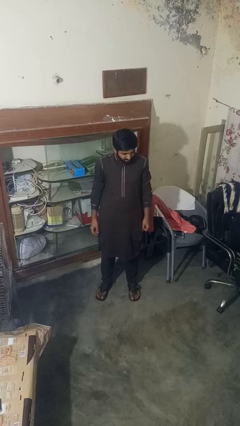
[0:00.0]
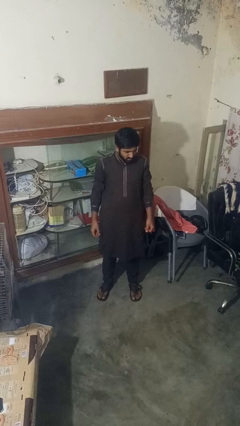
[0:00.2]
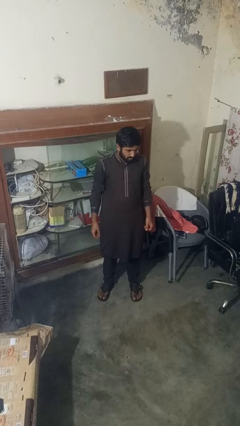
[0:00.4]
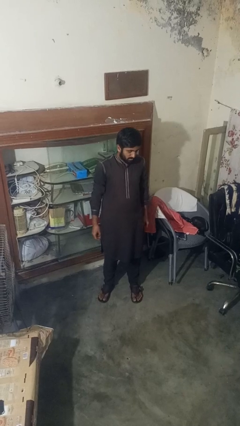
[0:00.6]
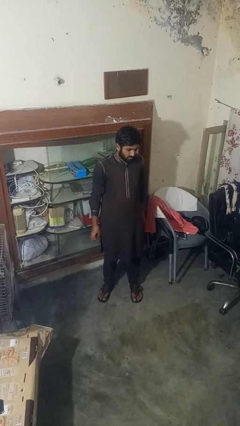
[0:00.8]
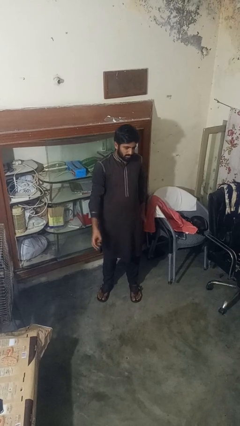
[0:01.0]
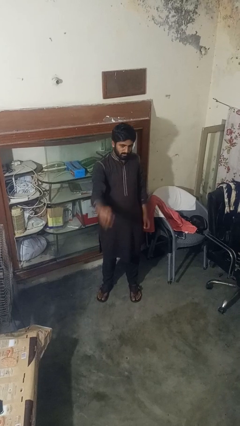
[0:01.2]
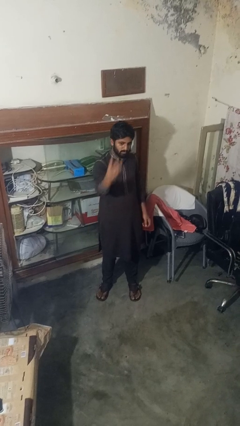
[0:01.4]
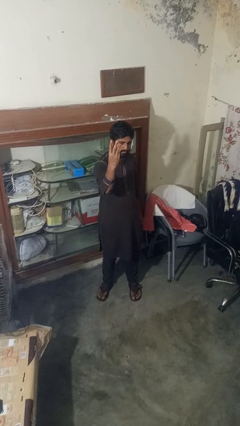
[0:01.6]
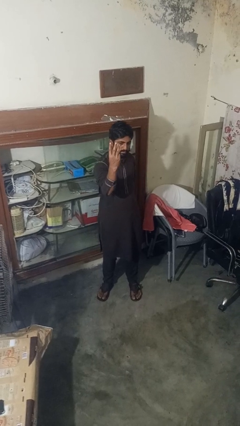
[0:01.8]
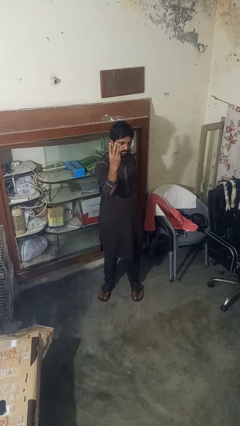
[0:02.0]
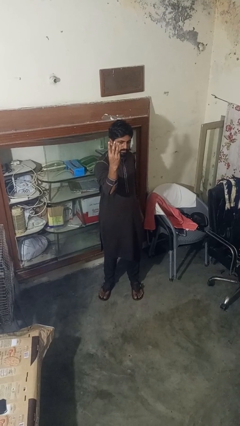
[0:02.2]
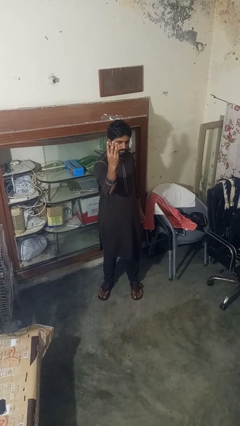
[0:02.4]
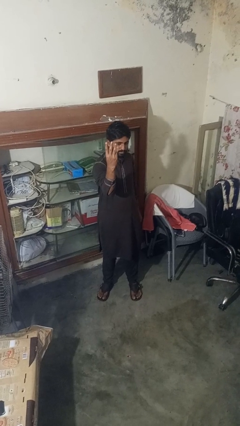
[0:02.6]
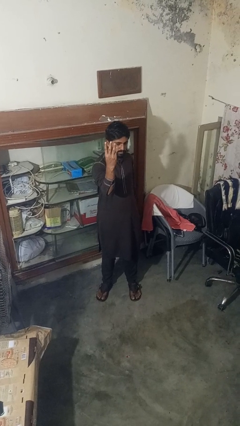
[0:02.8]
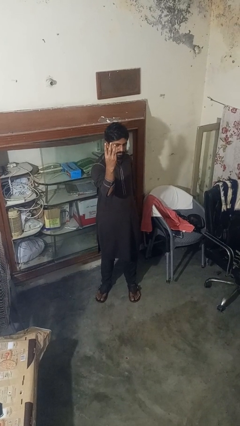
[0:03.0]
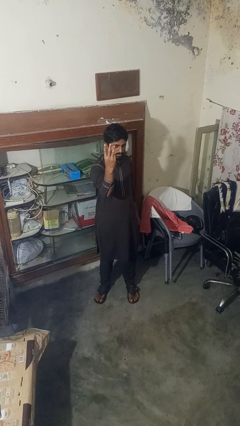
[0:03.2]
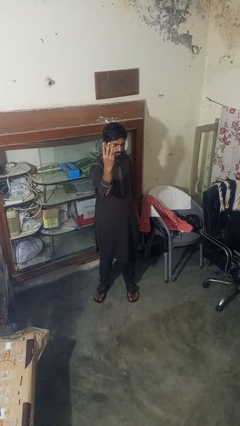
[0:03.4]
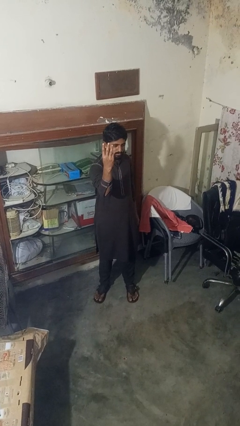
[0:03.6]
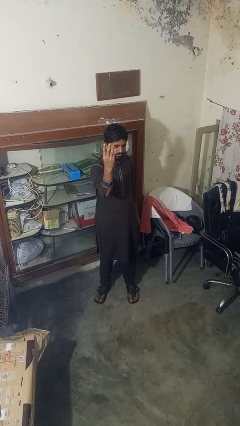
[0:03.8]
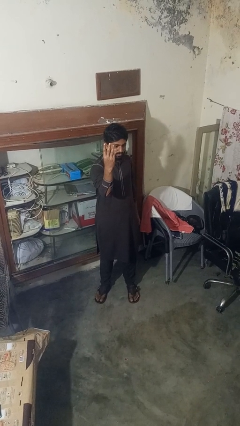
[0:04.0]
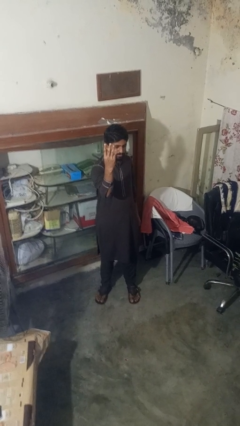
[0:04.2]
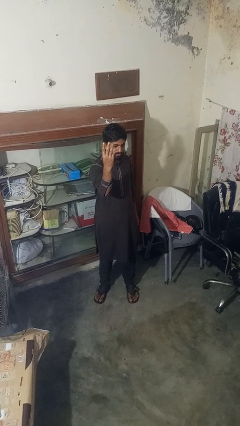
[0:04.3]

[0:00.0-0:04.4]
person gestures number three

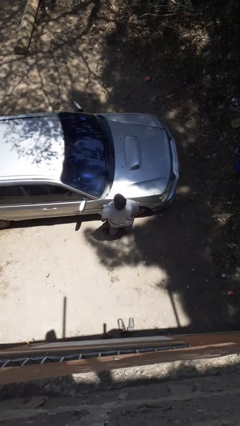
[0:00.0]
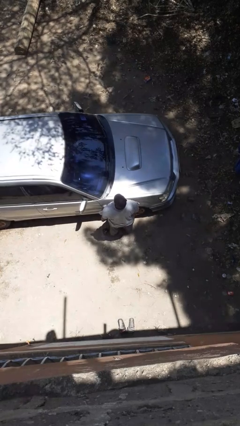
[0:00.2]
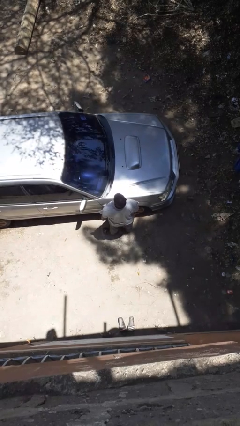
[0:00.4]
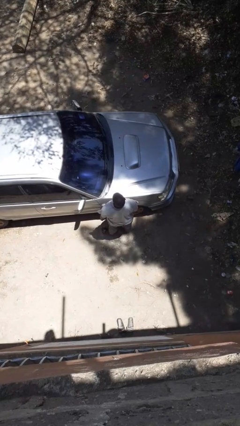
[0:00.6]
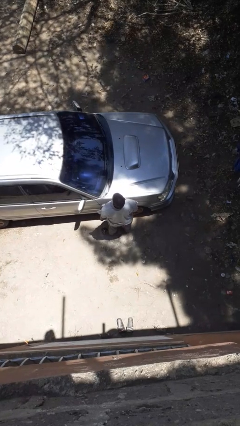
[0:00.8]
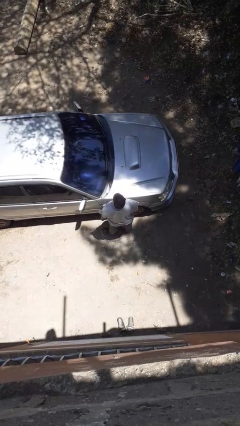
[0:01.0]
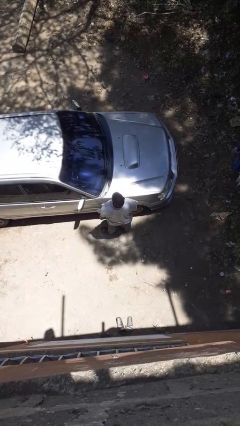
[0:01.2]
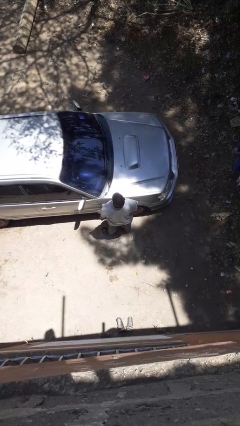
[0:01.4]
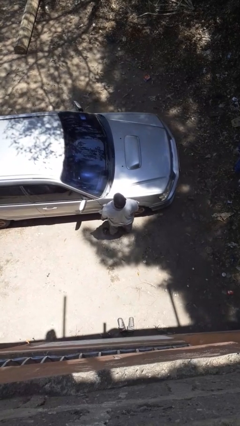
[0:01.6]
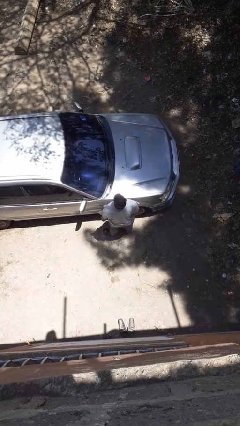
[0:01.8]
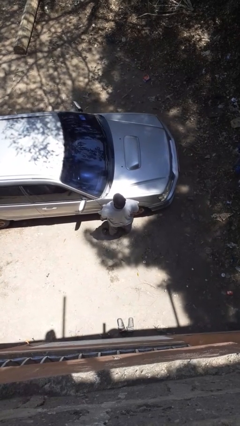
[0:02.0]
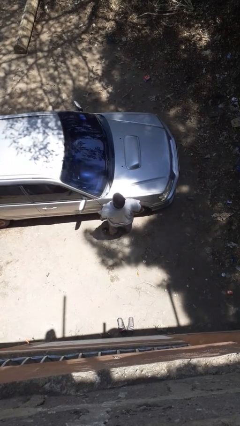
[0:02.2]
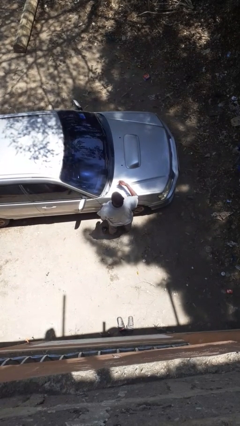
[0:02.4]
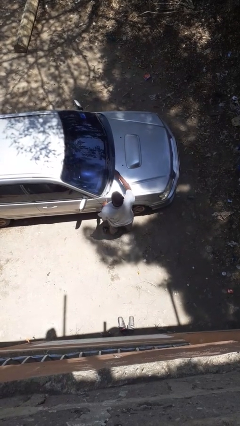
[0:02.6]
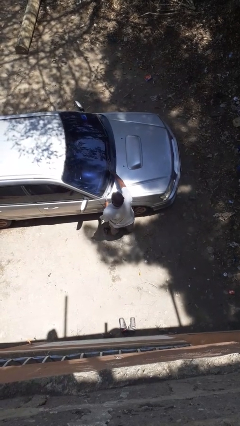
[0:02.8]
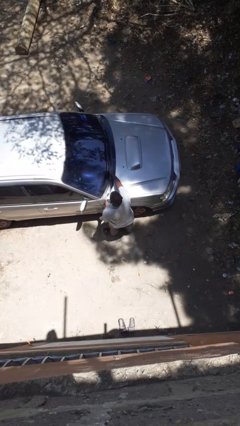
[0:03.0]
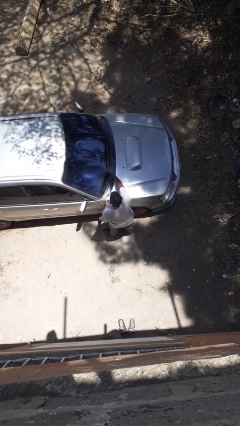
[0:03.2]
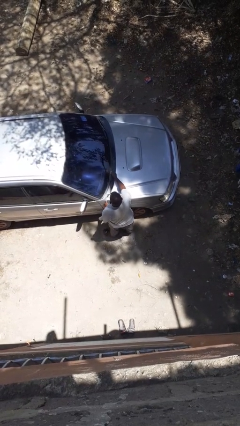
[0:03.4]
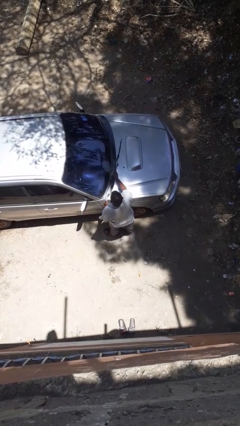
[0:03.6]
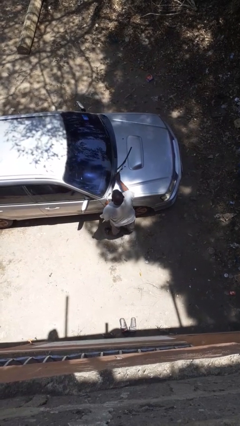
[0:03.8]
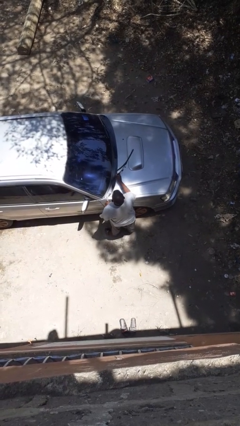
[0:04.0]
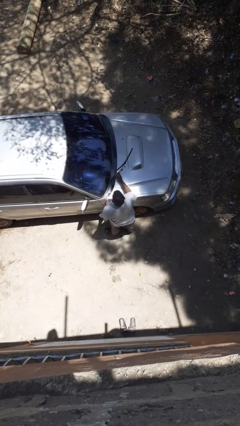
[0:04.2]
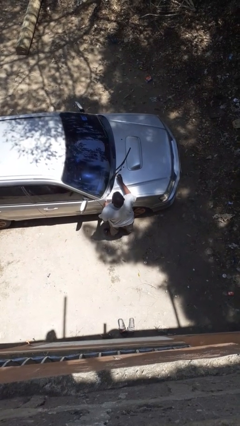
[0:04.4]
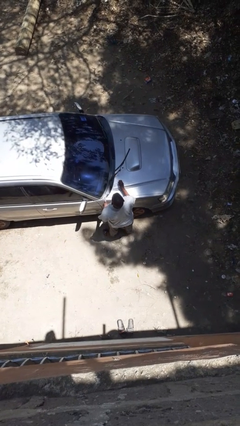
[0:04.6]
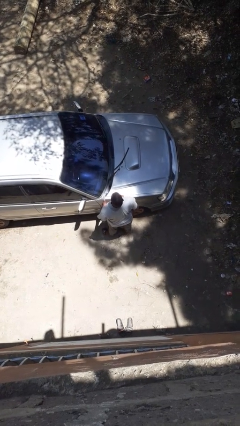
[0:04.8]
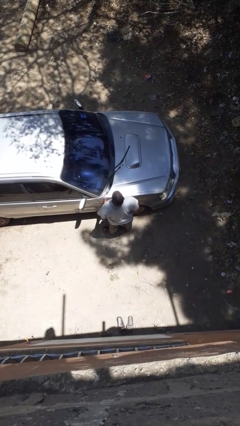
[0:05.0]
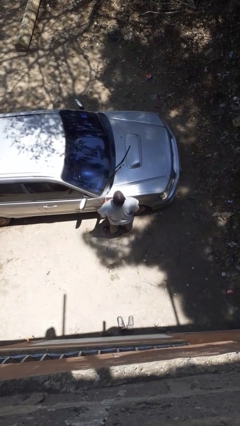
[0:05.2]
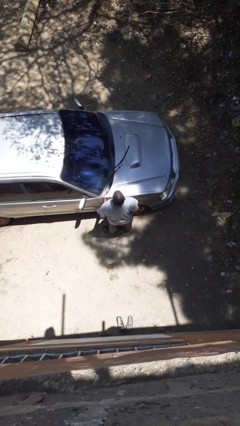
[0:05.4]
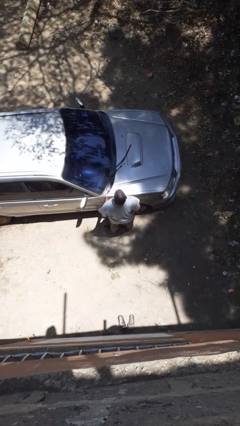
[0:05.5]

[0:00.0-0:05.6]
person flips up car wipers

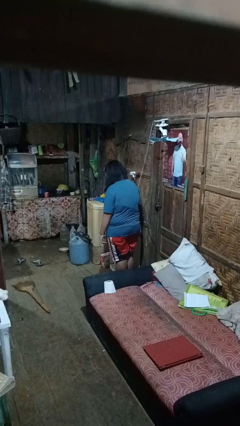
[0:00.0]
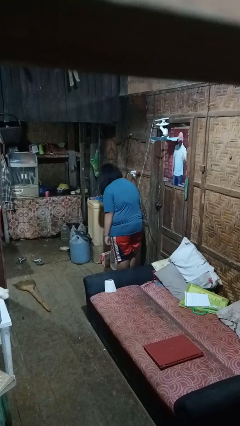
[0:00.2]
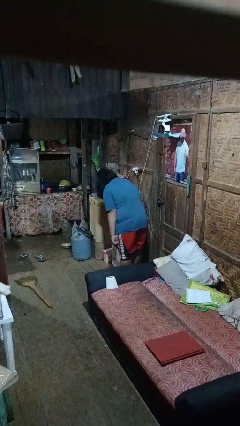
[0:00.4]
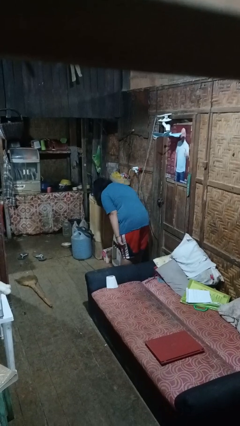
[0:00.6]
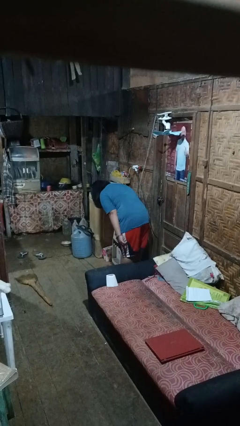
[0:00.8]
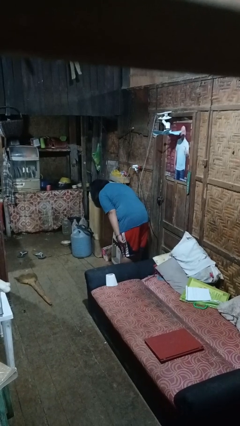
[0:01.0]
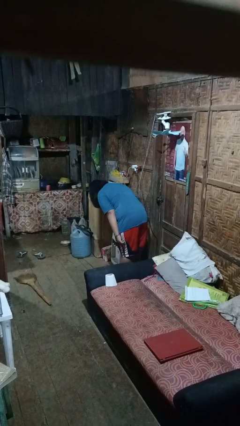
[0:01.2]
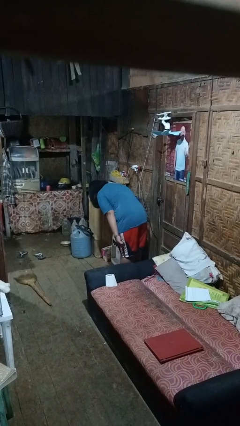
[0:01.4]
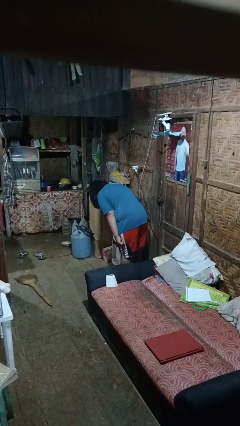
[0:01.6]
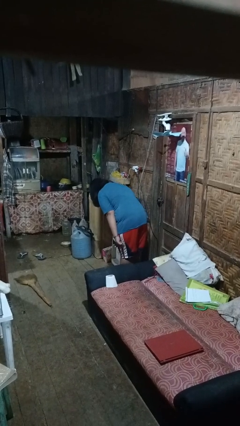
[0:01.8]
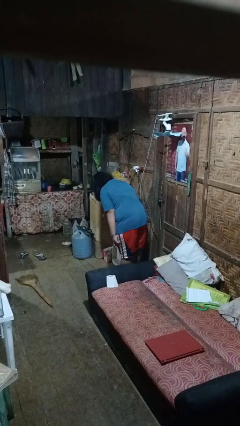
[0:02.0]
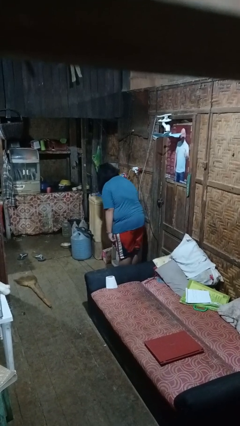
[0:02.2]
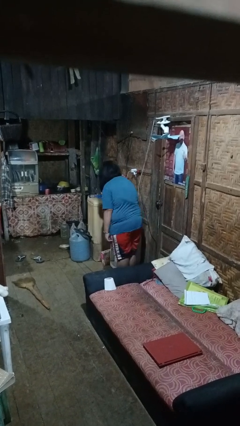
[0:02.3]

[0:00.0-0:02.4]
person bows

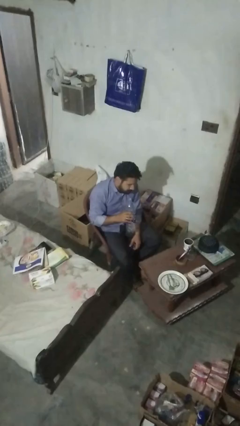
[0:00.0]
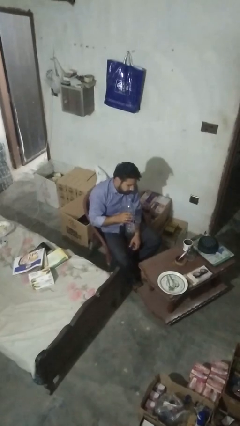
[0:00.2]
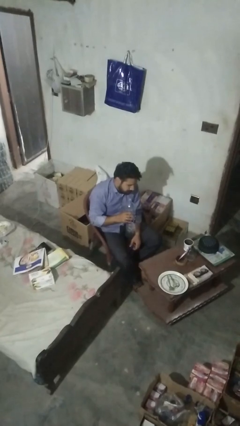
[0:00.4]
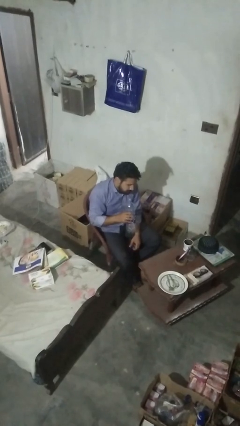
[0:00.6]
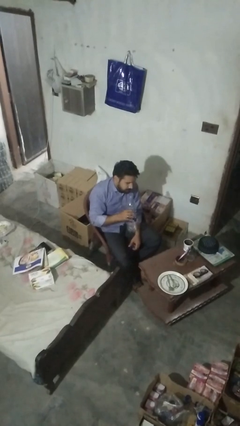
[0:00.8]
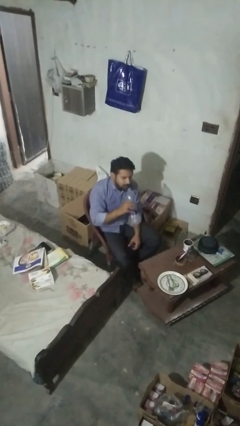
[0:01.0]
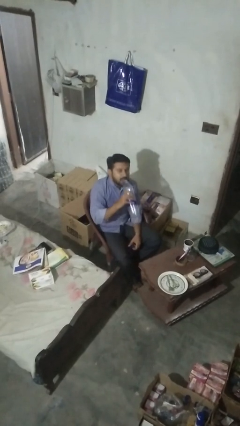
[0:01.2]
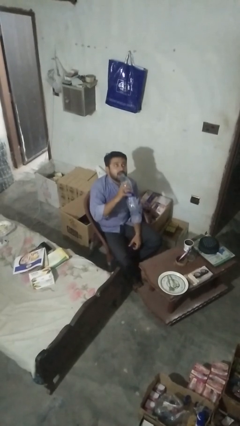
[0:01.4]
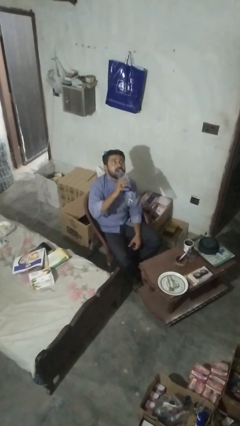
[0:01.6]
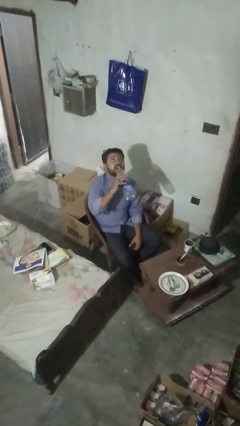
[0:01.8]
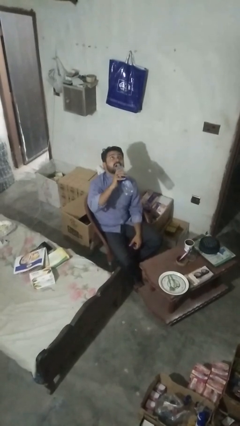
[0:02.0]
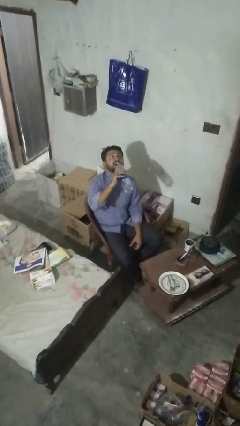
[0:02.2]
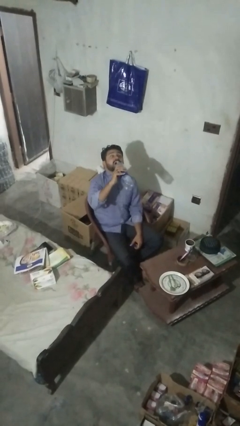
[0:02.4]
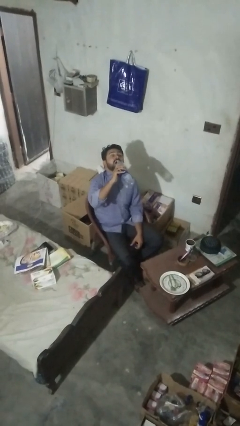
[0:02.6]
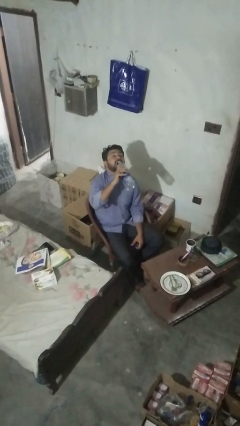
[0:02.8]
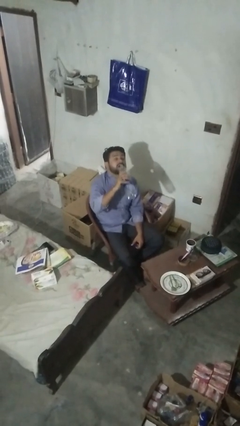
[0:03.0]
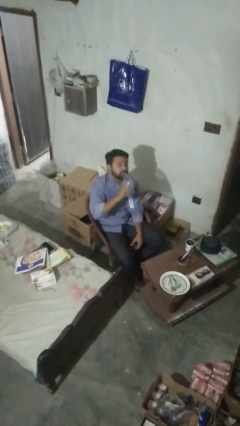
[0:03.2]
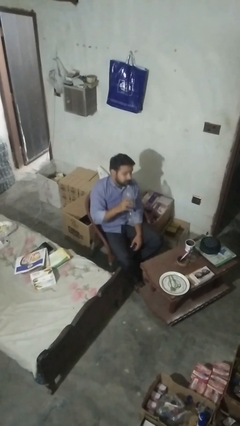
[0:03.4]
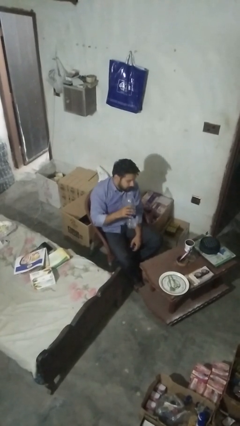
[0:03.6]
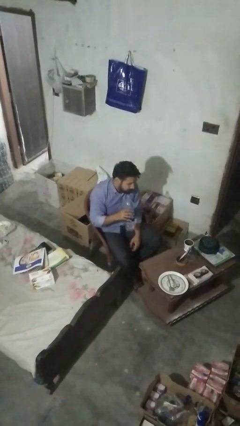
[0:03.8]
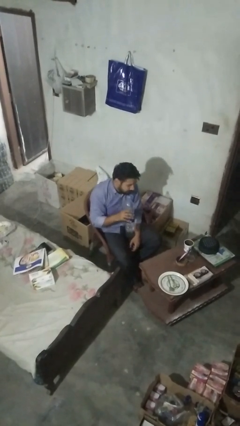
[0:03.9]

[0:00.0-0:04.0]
person drinks from bottle

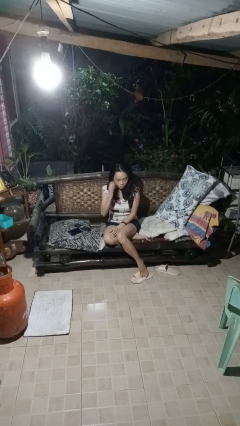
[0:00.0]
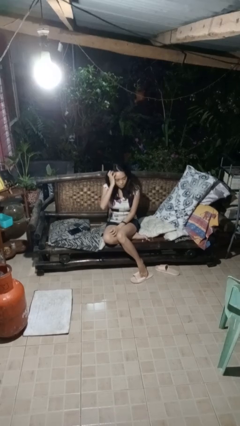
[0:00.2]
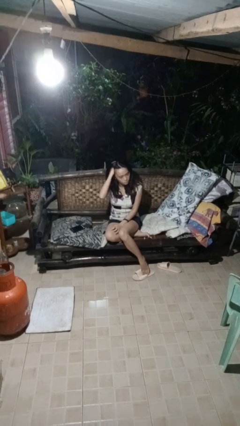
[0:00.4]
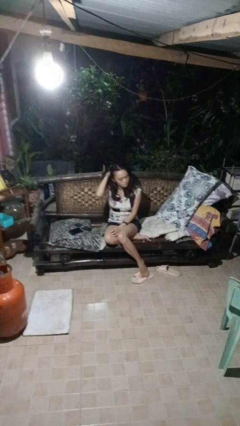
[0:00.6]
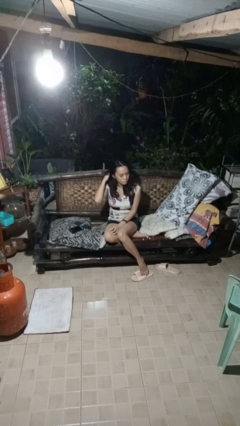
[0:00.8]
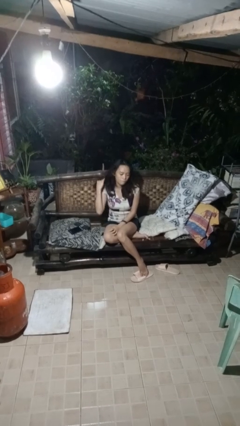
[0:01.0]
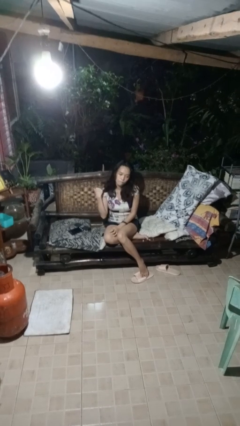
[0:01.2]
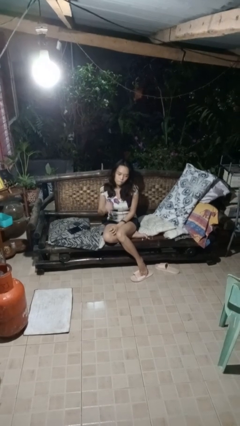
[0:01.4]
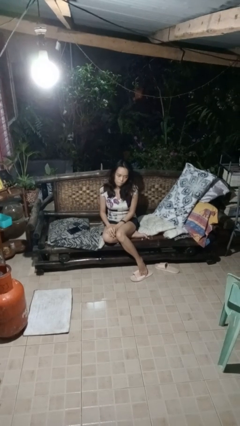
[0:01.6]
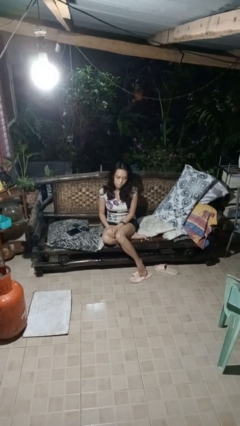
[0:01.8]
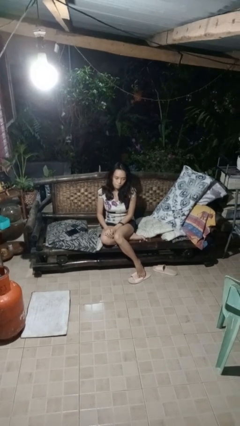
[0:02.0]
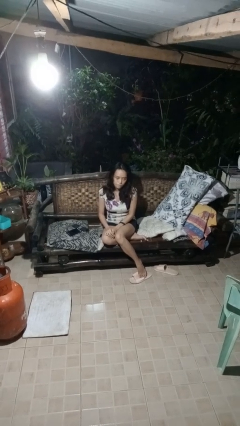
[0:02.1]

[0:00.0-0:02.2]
person searches in couch
